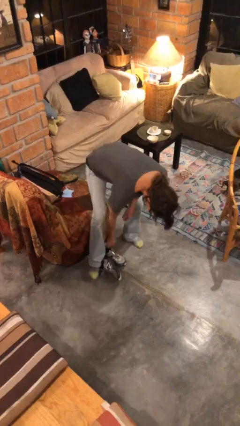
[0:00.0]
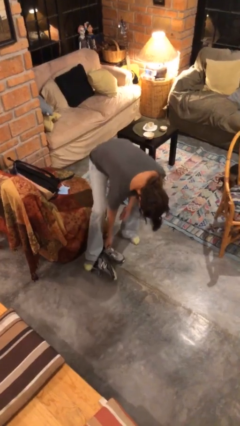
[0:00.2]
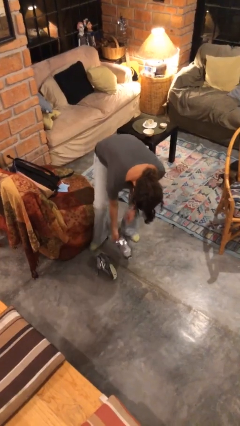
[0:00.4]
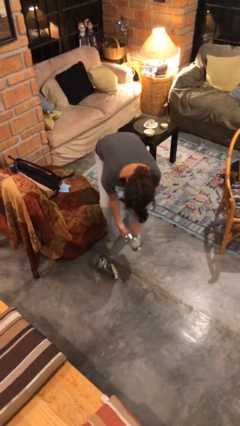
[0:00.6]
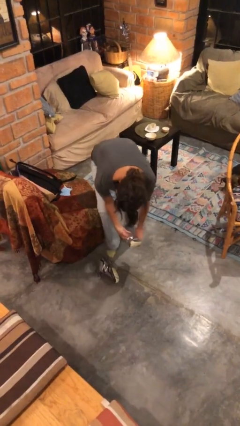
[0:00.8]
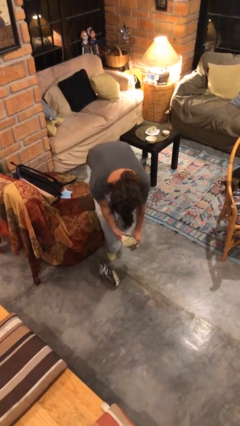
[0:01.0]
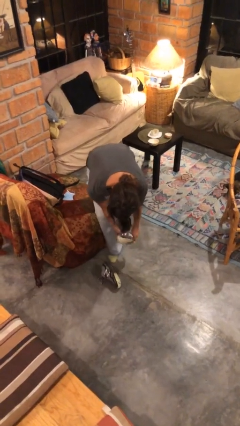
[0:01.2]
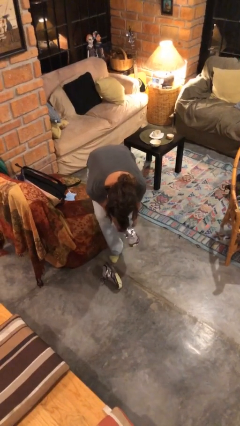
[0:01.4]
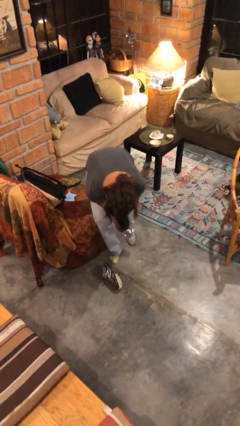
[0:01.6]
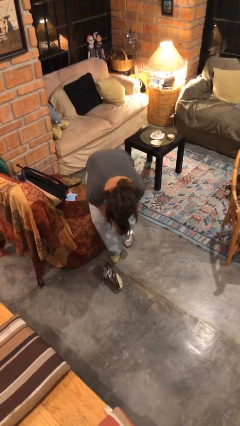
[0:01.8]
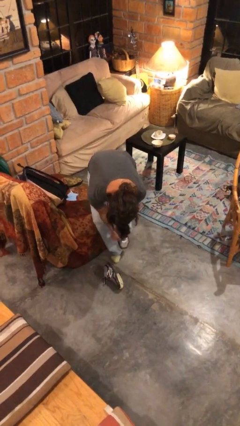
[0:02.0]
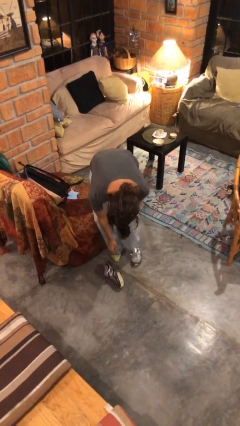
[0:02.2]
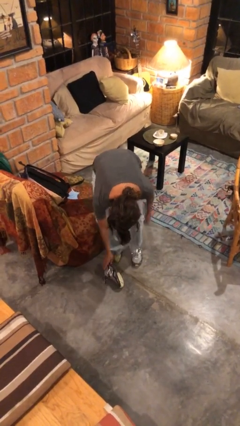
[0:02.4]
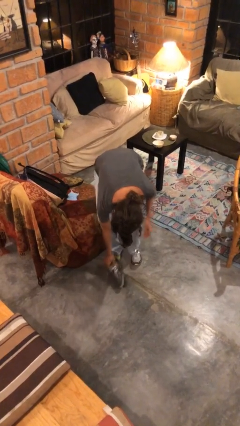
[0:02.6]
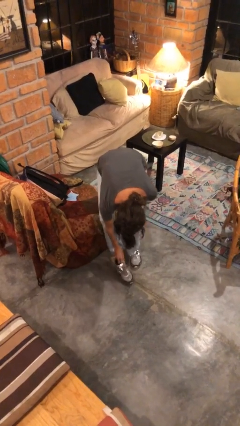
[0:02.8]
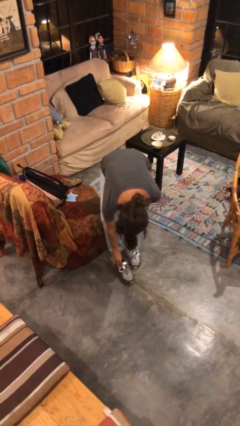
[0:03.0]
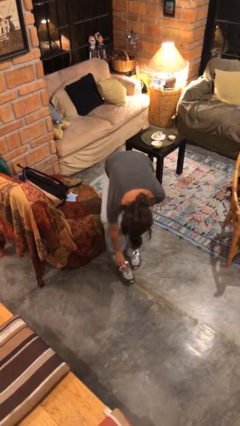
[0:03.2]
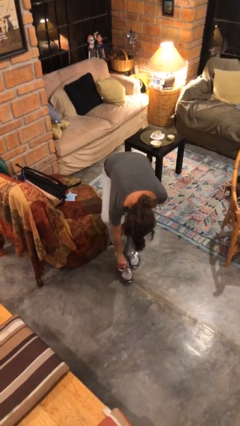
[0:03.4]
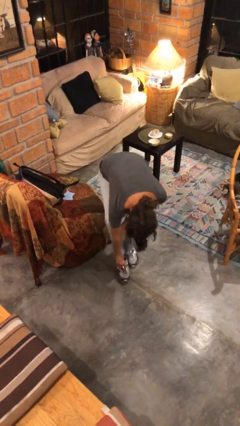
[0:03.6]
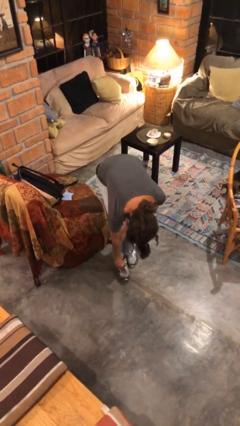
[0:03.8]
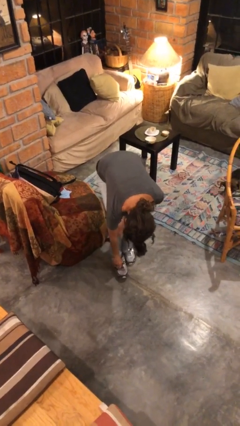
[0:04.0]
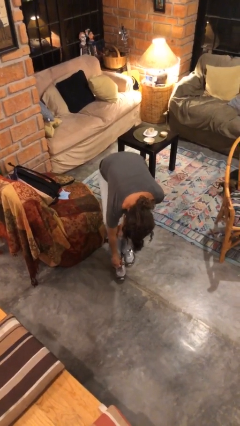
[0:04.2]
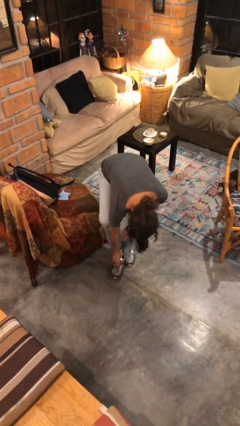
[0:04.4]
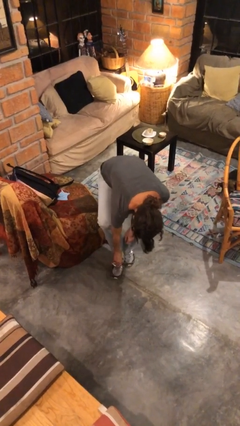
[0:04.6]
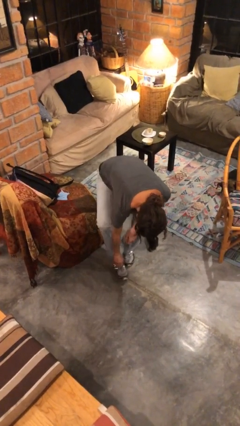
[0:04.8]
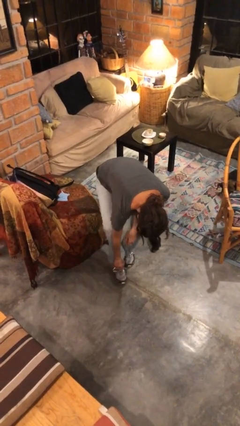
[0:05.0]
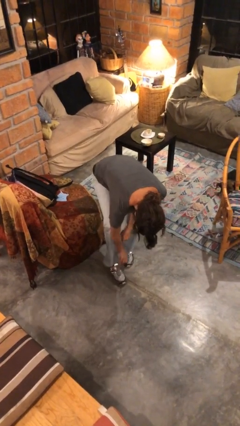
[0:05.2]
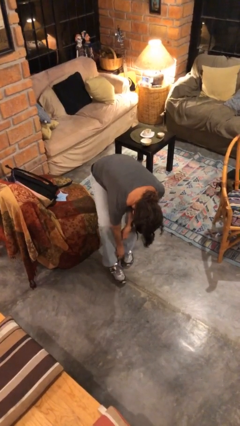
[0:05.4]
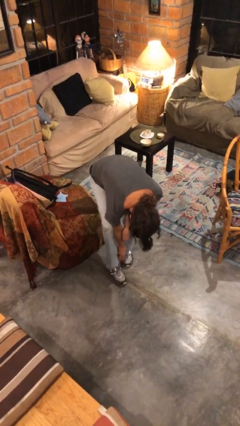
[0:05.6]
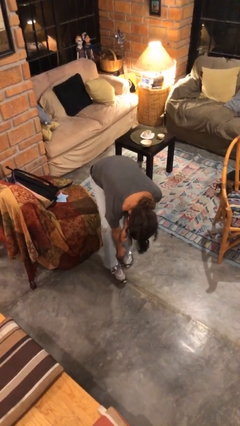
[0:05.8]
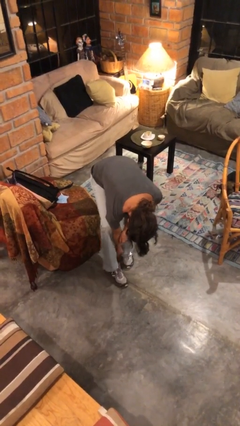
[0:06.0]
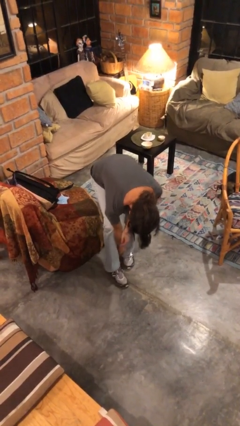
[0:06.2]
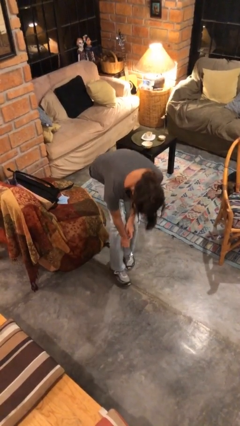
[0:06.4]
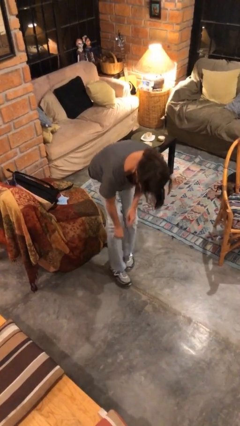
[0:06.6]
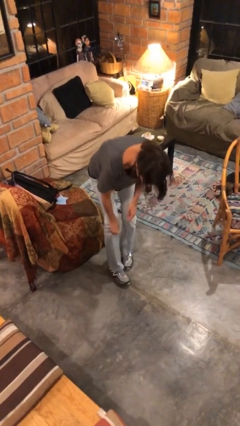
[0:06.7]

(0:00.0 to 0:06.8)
person puts on shoes

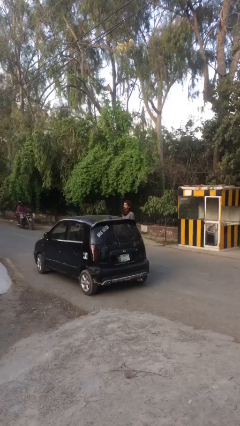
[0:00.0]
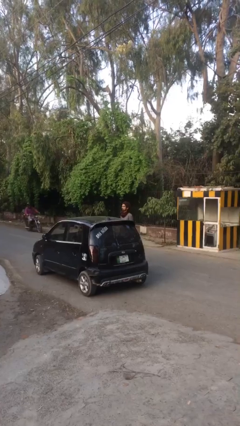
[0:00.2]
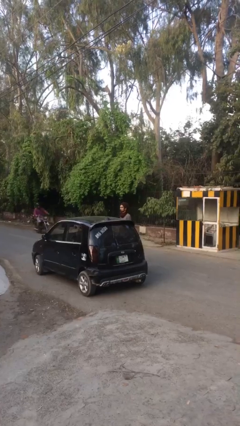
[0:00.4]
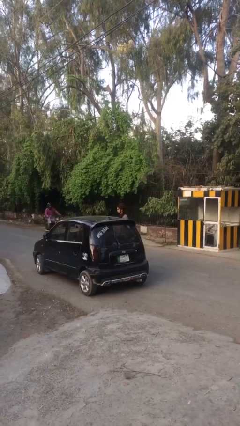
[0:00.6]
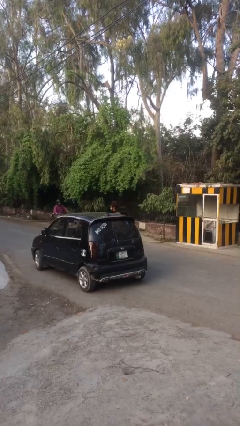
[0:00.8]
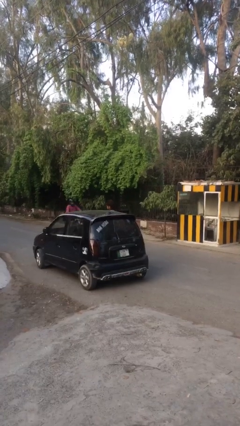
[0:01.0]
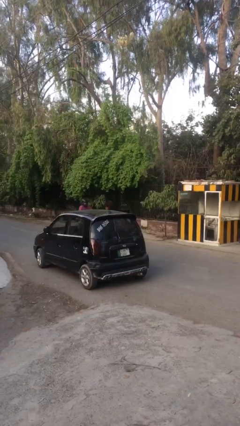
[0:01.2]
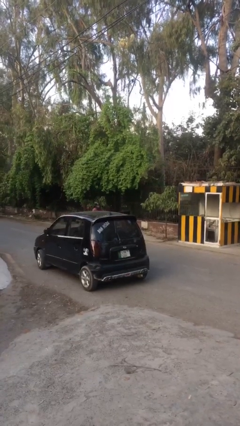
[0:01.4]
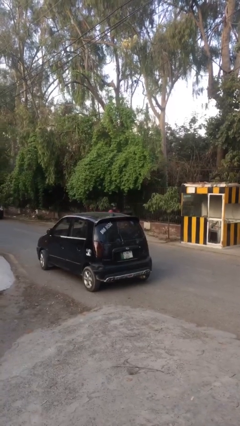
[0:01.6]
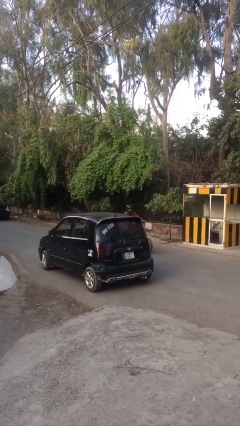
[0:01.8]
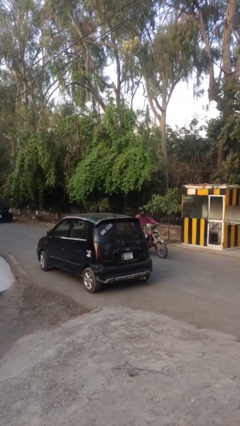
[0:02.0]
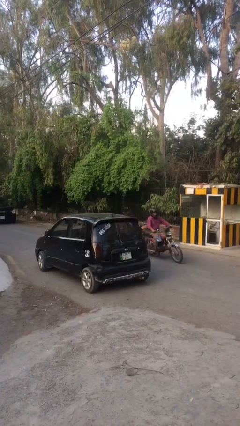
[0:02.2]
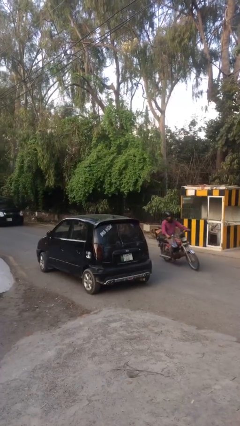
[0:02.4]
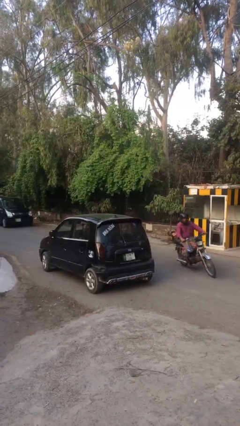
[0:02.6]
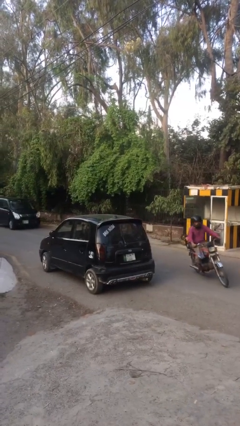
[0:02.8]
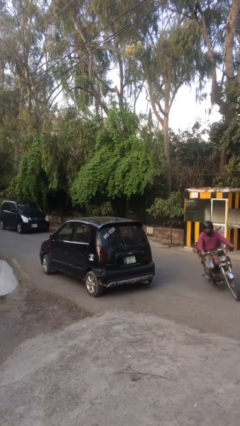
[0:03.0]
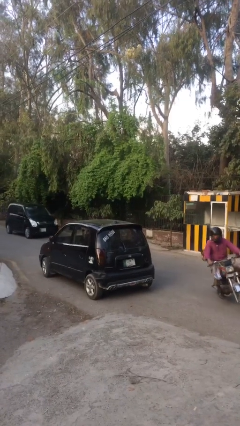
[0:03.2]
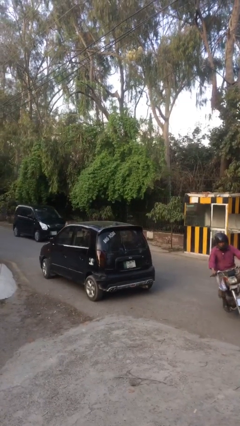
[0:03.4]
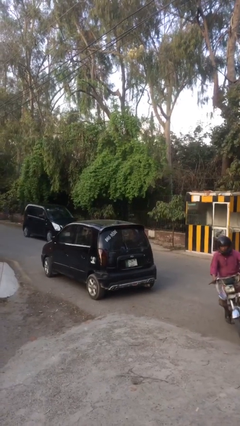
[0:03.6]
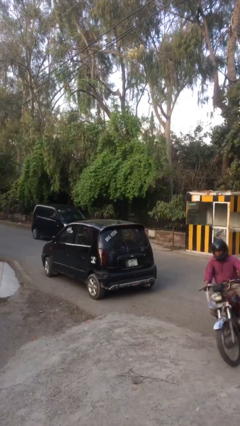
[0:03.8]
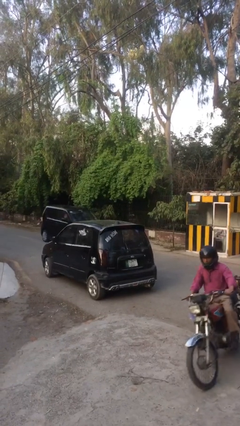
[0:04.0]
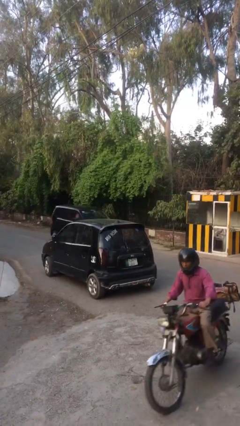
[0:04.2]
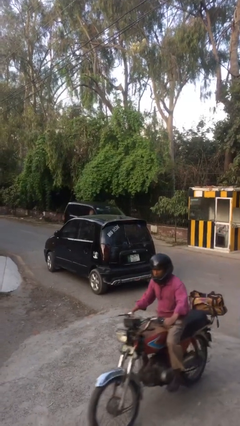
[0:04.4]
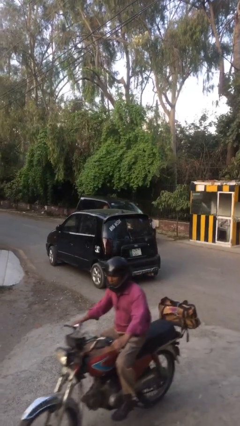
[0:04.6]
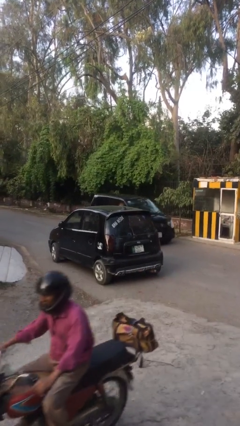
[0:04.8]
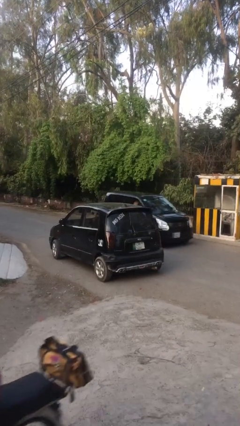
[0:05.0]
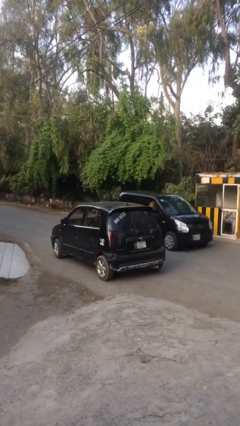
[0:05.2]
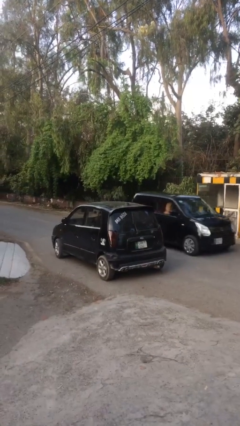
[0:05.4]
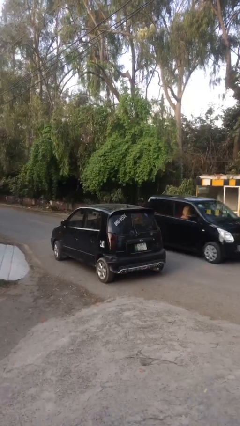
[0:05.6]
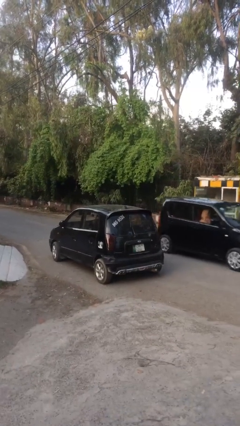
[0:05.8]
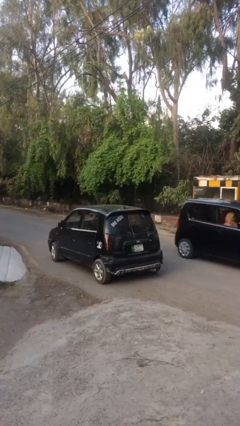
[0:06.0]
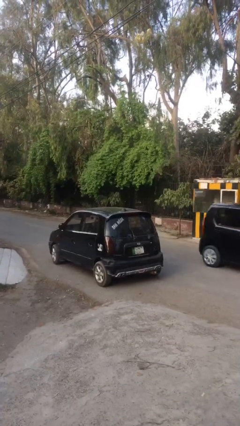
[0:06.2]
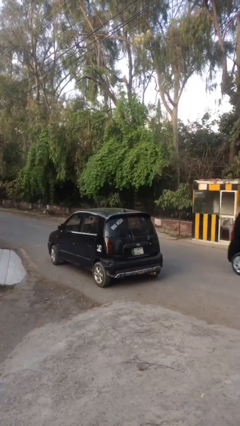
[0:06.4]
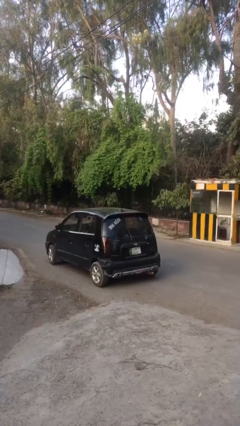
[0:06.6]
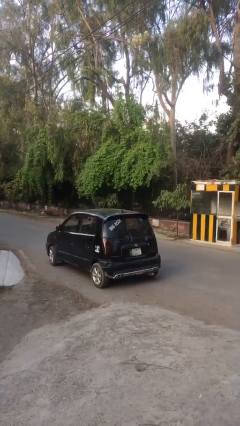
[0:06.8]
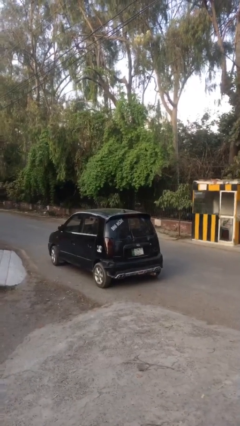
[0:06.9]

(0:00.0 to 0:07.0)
person enters car

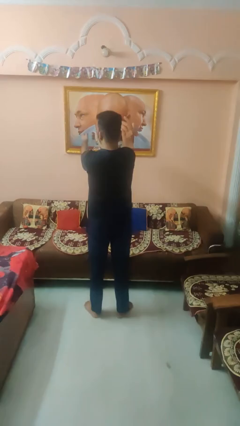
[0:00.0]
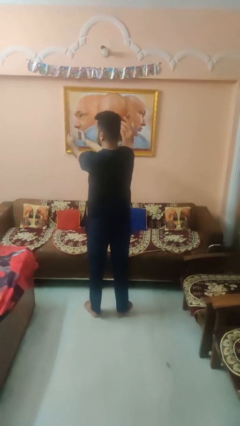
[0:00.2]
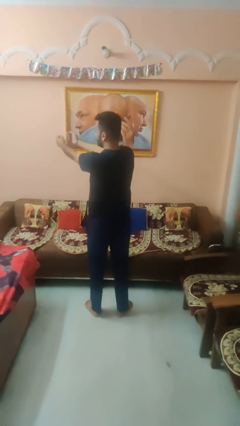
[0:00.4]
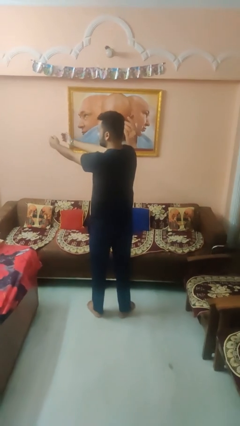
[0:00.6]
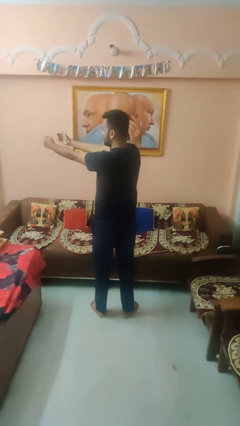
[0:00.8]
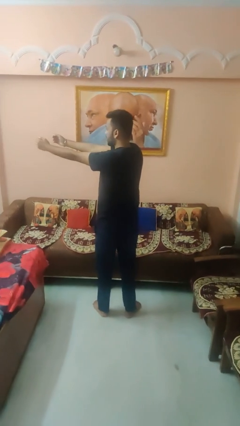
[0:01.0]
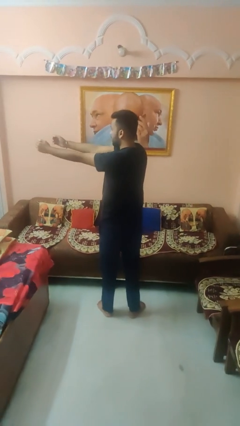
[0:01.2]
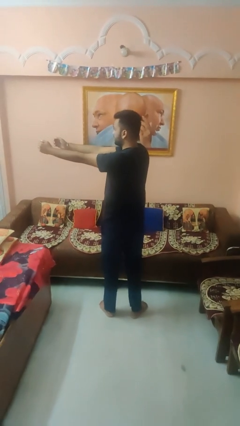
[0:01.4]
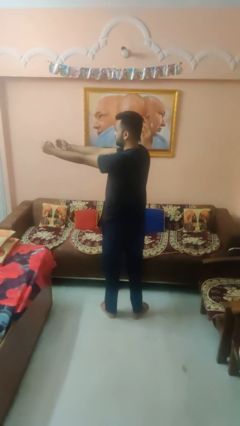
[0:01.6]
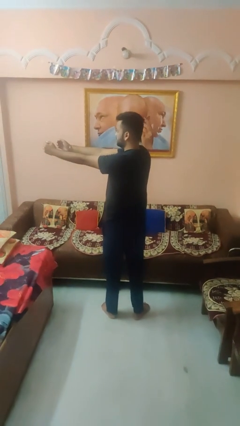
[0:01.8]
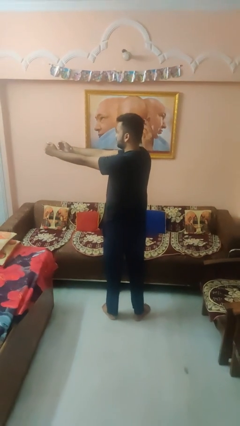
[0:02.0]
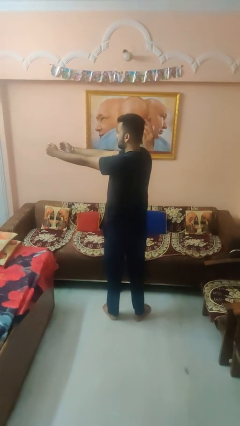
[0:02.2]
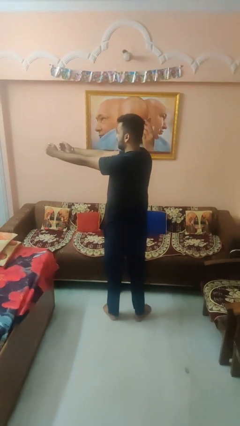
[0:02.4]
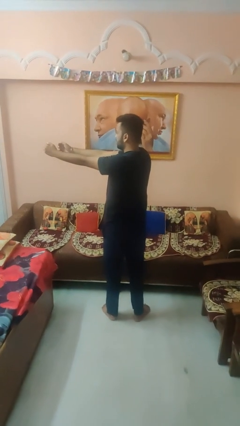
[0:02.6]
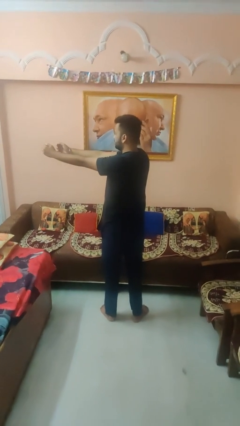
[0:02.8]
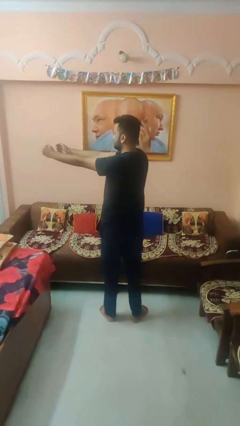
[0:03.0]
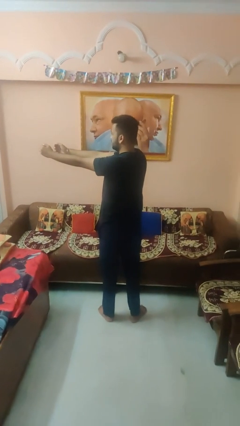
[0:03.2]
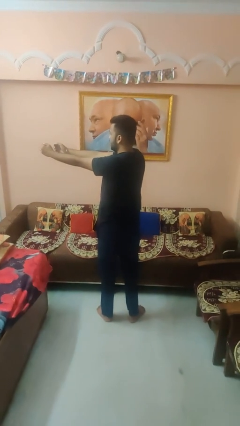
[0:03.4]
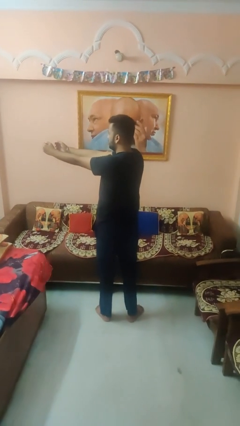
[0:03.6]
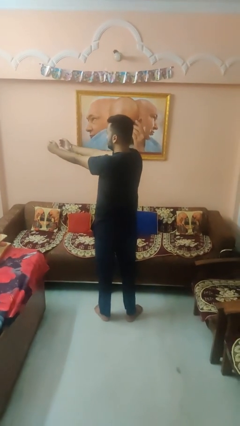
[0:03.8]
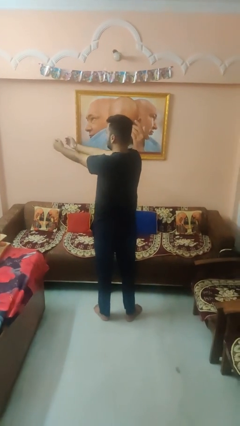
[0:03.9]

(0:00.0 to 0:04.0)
person gestures swipe left

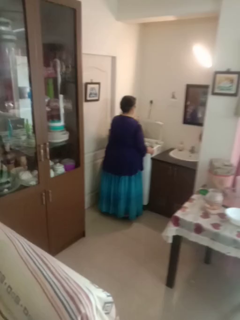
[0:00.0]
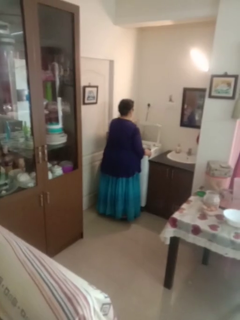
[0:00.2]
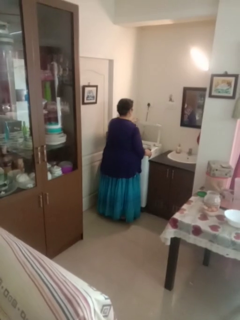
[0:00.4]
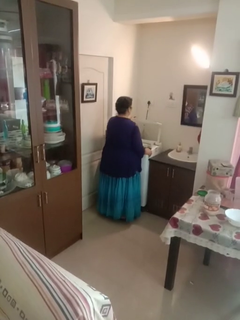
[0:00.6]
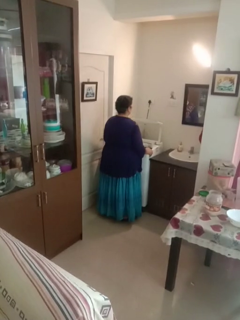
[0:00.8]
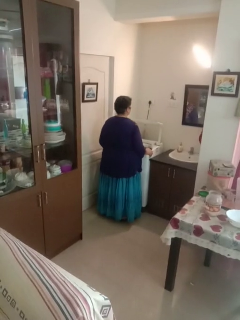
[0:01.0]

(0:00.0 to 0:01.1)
person opens clothes washer
